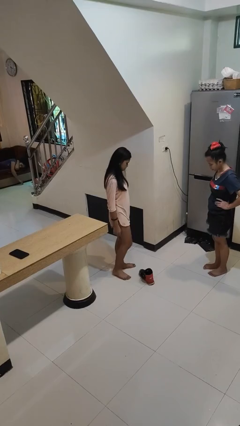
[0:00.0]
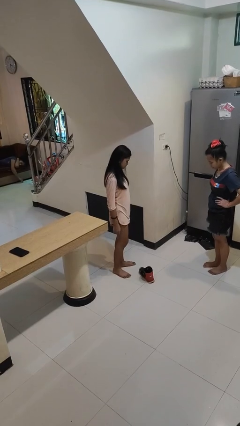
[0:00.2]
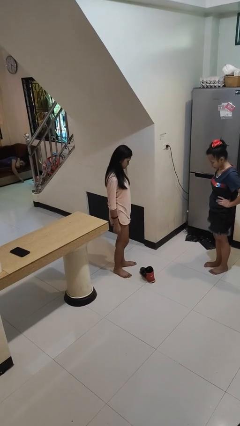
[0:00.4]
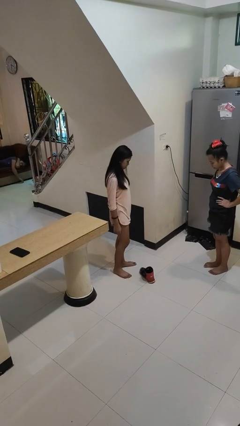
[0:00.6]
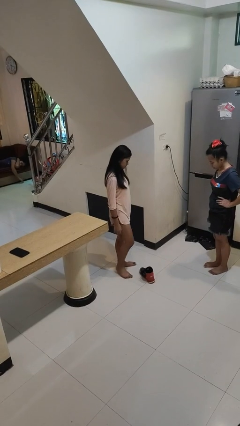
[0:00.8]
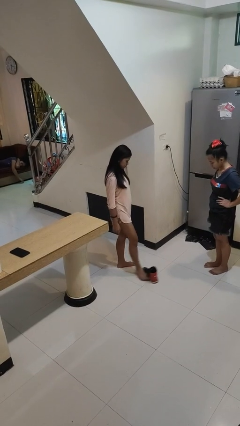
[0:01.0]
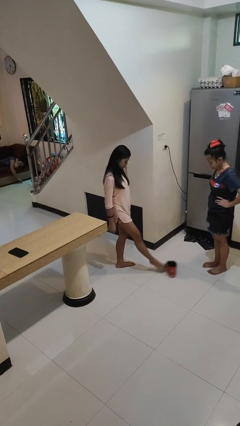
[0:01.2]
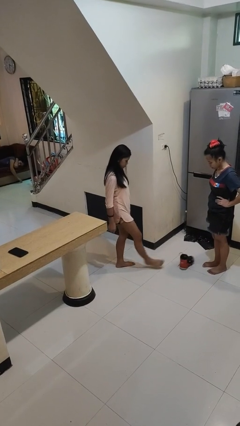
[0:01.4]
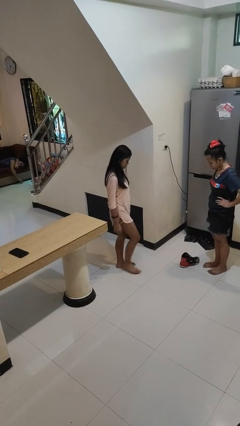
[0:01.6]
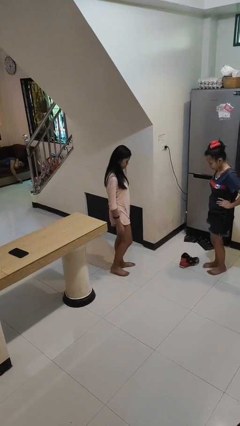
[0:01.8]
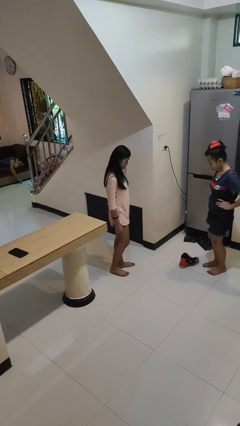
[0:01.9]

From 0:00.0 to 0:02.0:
person kicks object to person

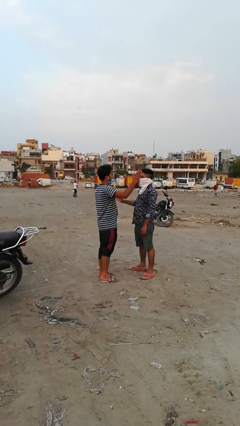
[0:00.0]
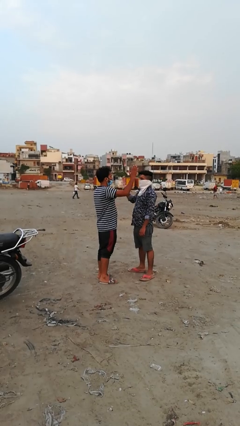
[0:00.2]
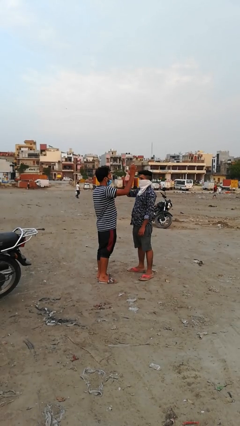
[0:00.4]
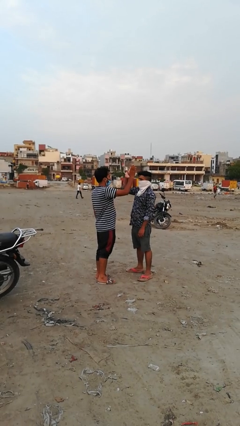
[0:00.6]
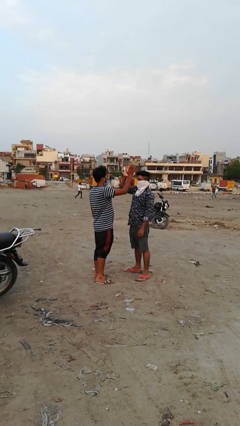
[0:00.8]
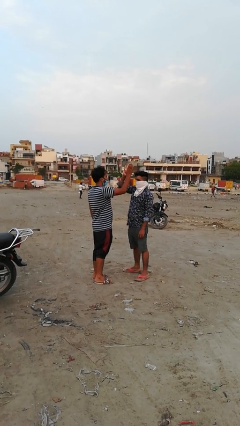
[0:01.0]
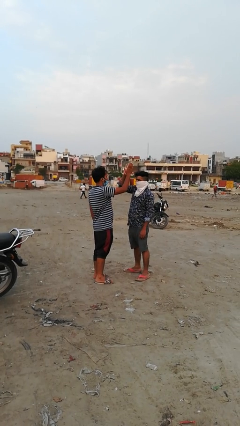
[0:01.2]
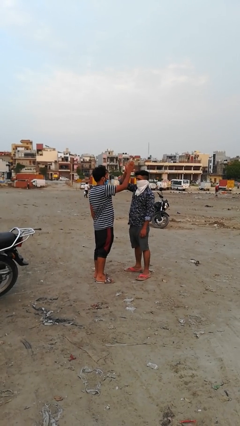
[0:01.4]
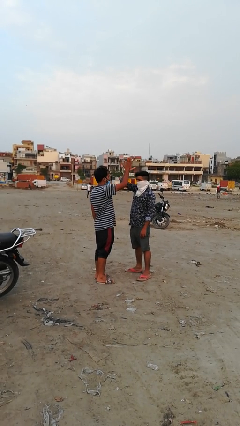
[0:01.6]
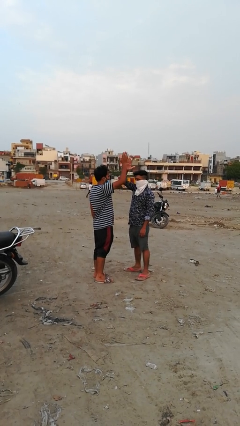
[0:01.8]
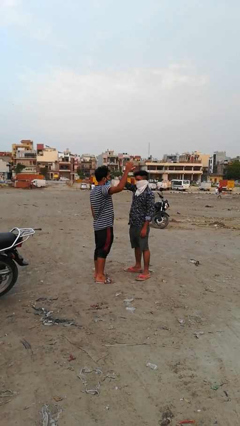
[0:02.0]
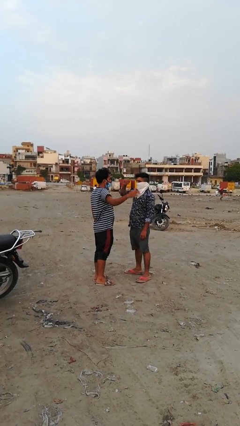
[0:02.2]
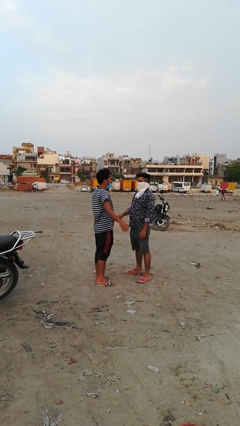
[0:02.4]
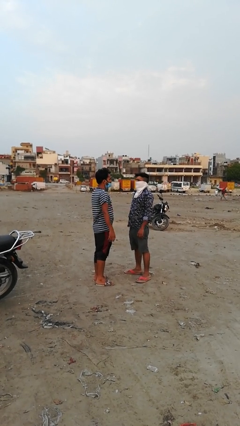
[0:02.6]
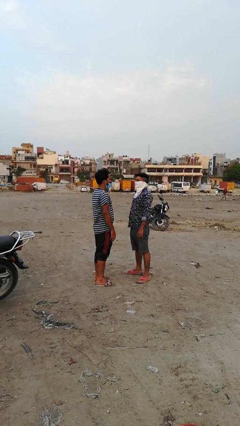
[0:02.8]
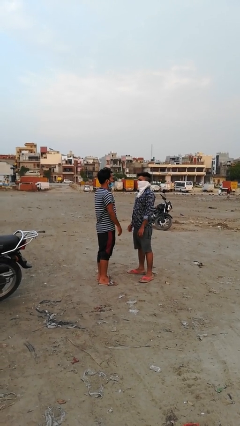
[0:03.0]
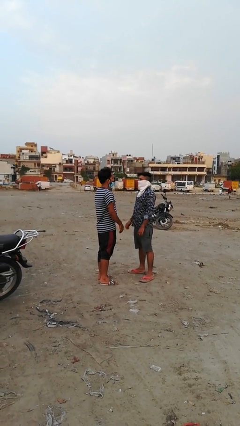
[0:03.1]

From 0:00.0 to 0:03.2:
person highfives hand

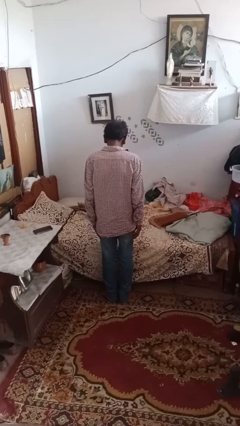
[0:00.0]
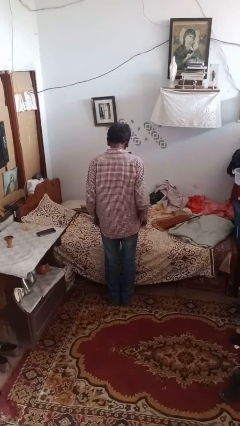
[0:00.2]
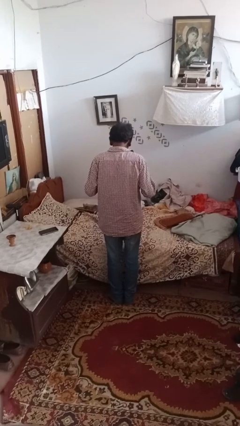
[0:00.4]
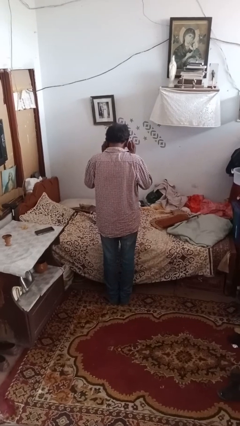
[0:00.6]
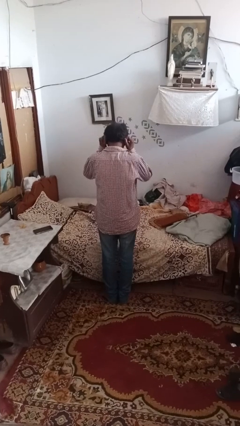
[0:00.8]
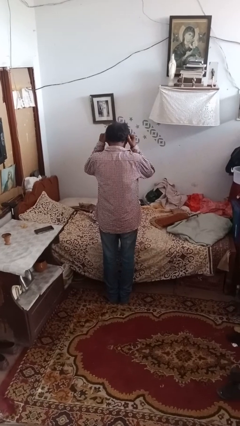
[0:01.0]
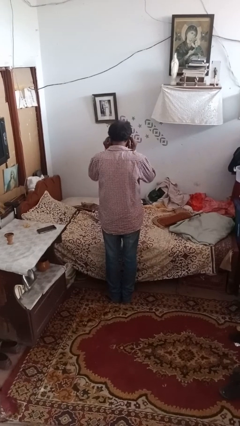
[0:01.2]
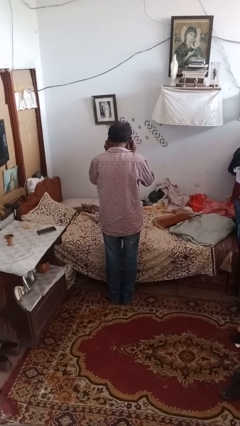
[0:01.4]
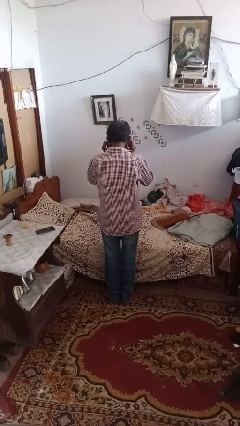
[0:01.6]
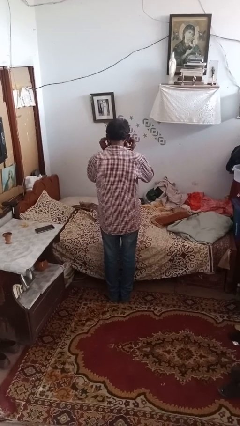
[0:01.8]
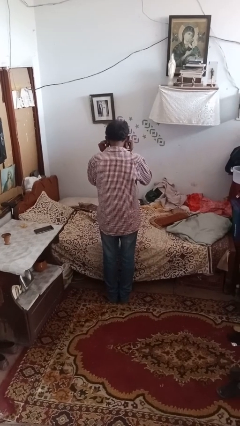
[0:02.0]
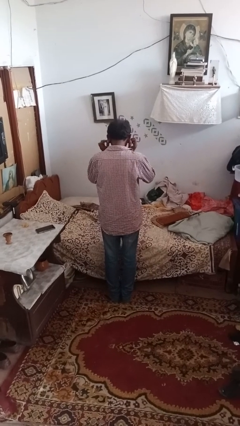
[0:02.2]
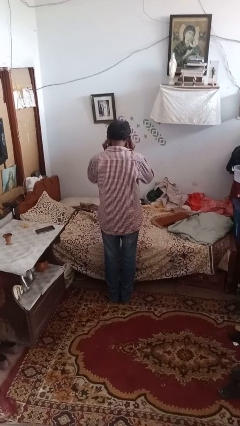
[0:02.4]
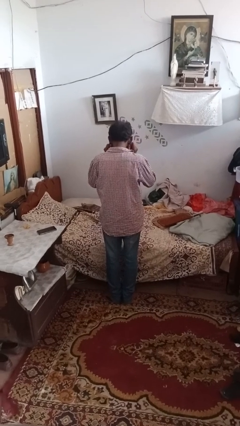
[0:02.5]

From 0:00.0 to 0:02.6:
person touches earlobe

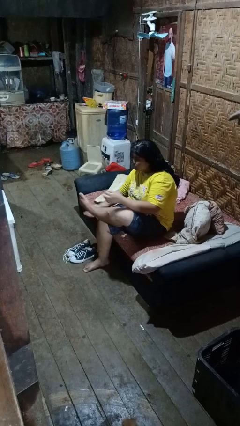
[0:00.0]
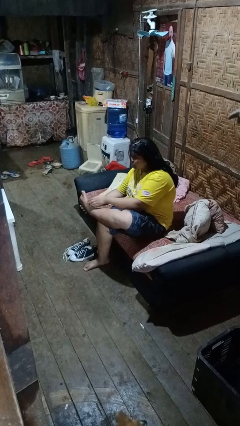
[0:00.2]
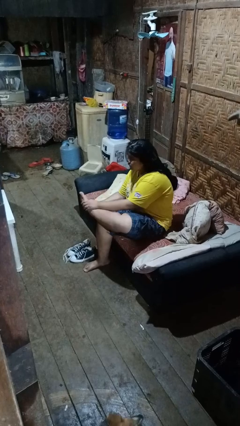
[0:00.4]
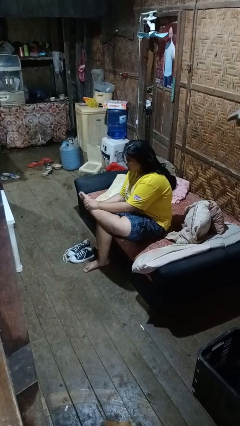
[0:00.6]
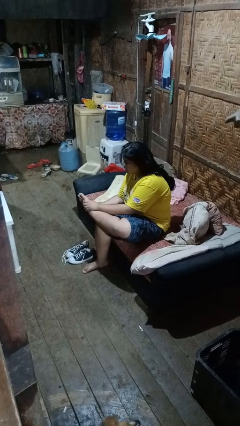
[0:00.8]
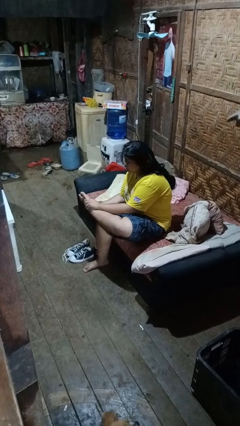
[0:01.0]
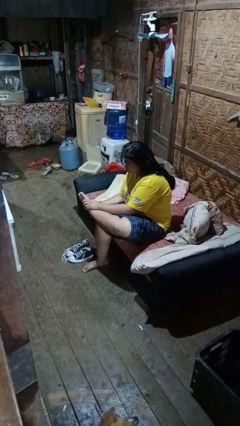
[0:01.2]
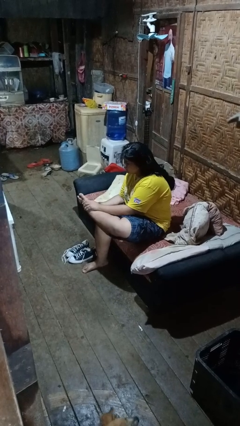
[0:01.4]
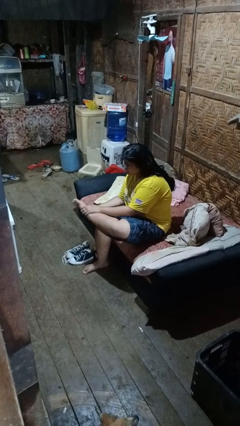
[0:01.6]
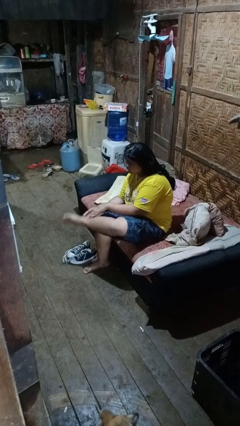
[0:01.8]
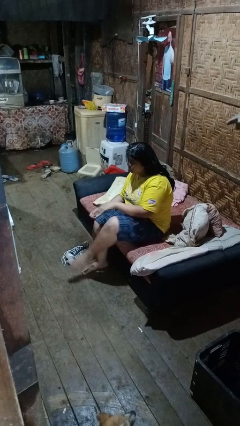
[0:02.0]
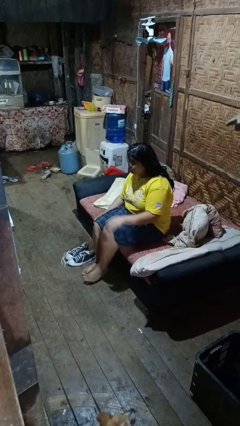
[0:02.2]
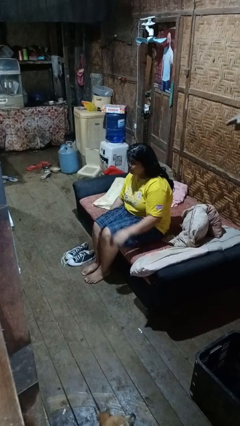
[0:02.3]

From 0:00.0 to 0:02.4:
person rubs foot

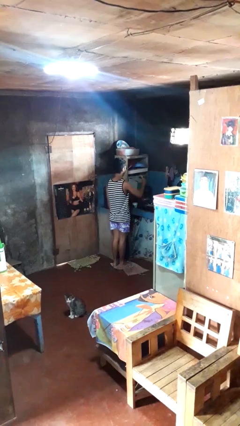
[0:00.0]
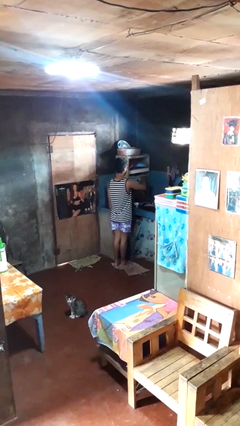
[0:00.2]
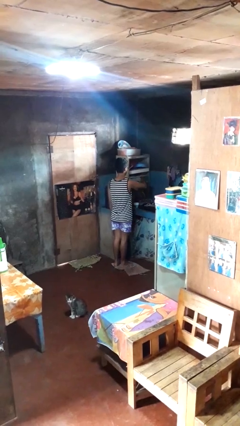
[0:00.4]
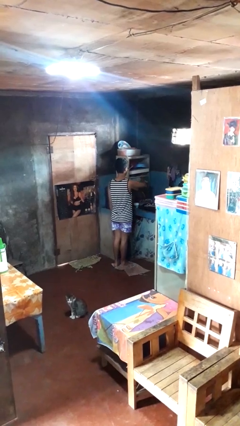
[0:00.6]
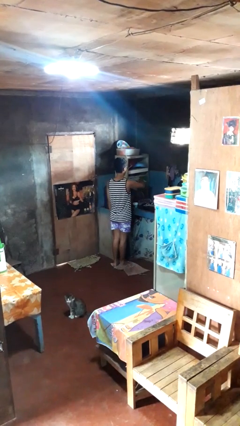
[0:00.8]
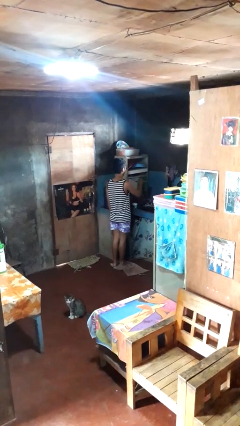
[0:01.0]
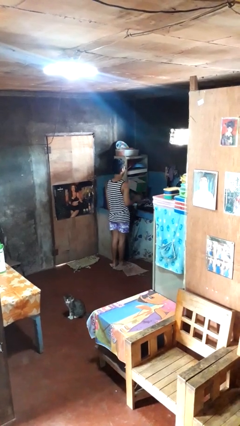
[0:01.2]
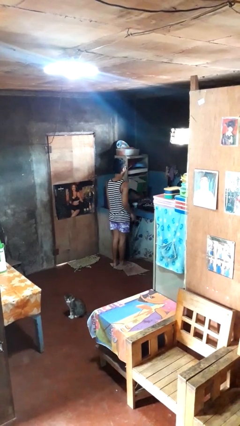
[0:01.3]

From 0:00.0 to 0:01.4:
person puts object into kitchen drawer

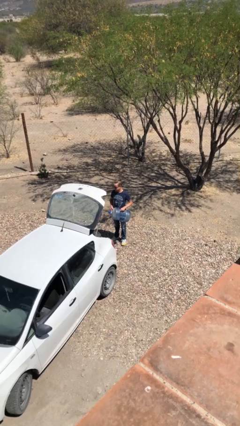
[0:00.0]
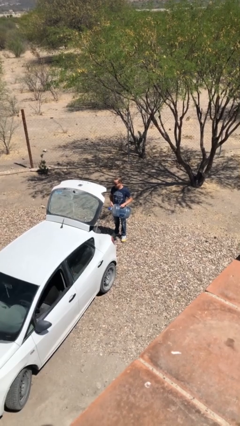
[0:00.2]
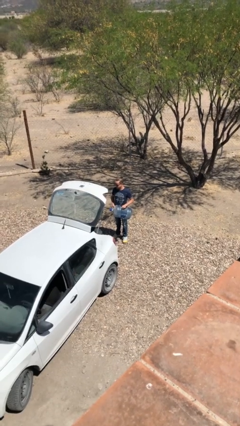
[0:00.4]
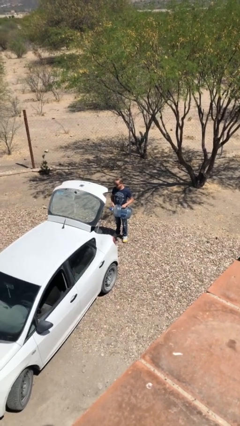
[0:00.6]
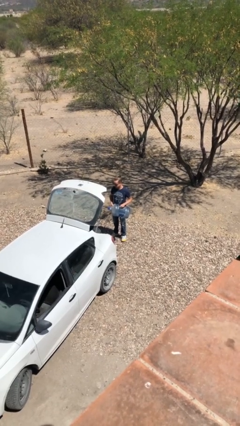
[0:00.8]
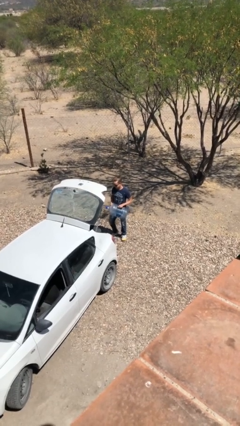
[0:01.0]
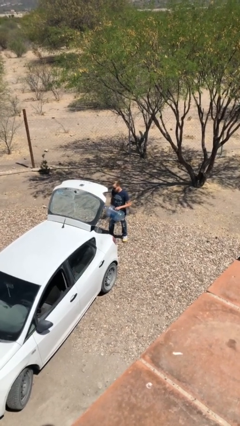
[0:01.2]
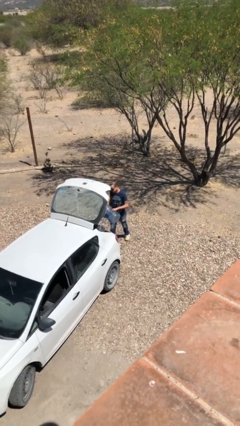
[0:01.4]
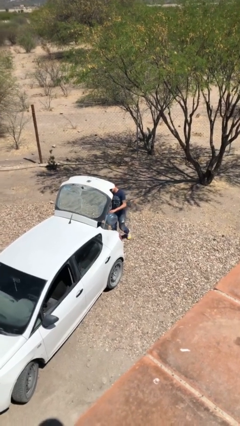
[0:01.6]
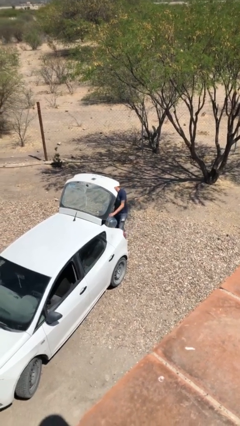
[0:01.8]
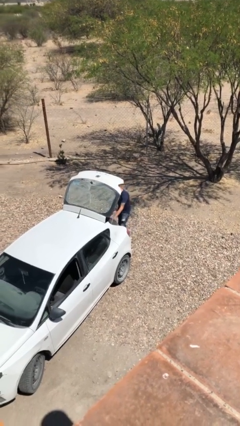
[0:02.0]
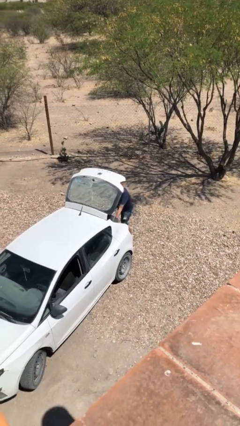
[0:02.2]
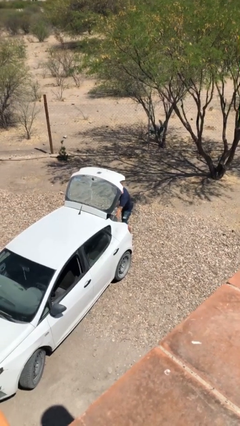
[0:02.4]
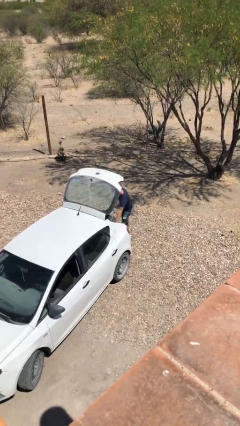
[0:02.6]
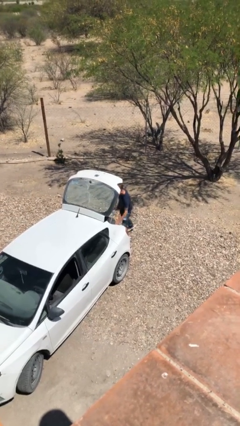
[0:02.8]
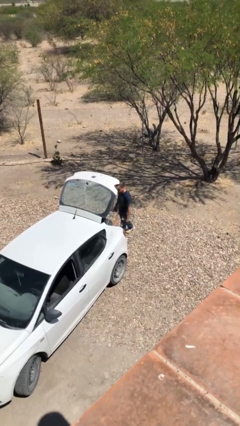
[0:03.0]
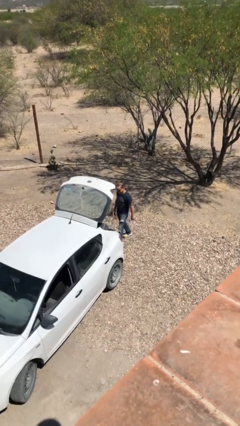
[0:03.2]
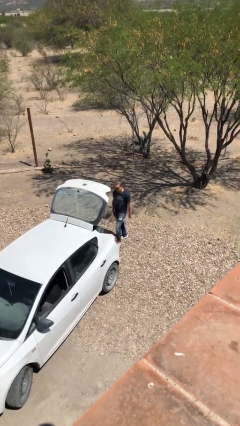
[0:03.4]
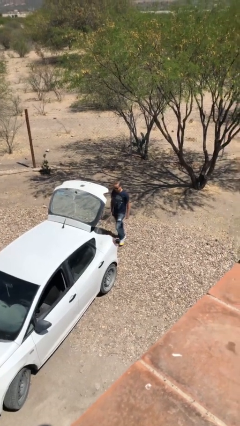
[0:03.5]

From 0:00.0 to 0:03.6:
person loads car

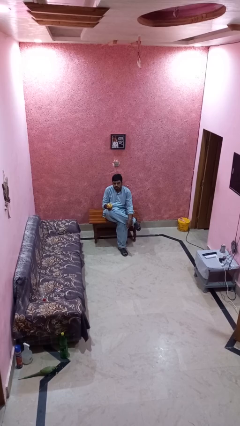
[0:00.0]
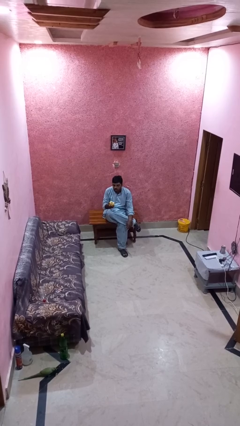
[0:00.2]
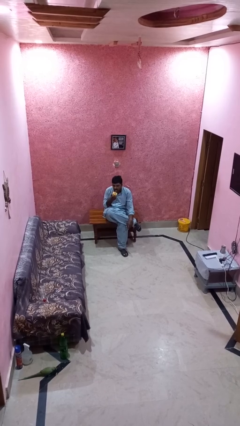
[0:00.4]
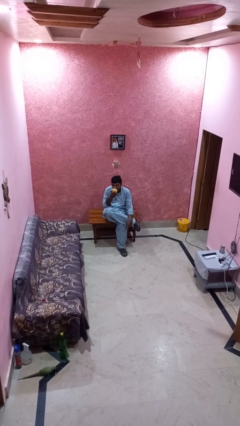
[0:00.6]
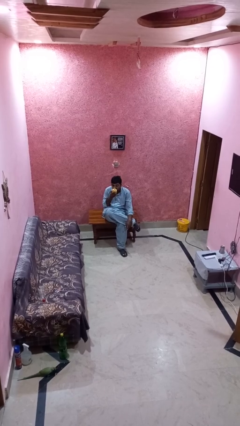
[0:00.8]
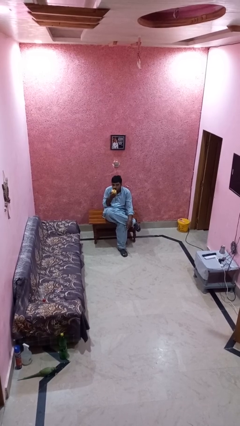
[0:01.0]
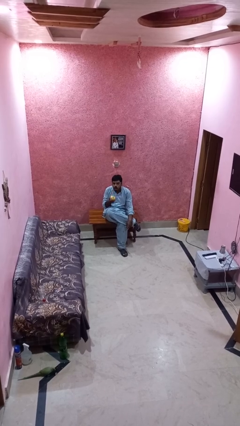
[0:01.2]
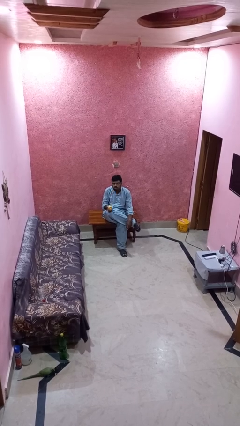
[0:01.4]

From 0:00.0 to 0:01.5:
person eats apple

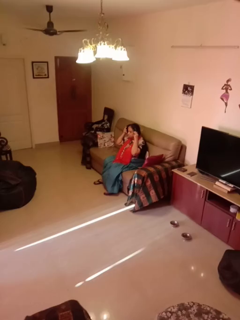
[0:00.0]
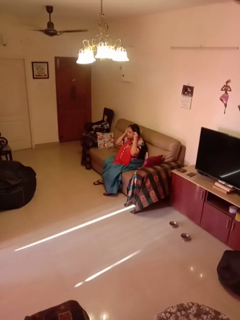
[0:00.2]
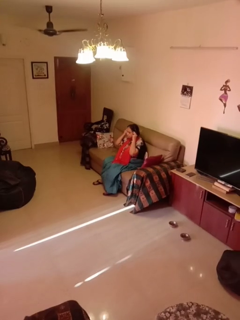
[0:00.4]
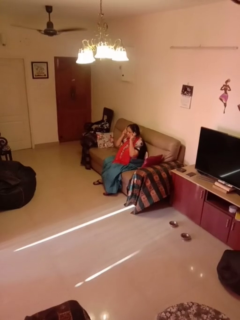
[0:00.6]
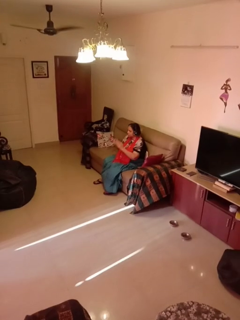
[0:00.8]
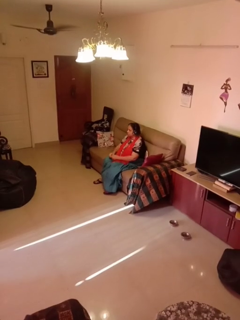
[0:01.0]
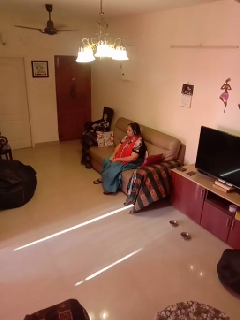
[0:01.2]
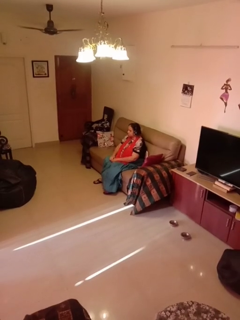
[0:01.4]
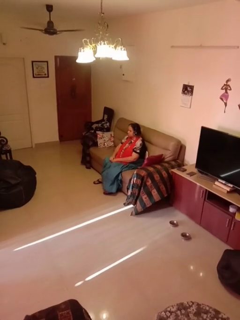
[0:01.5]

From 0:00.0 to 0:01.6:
person puts on headphones
